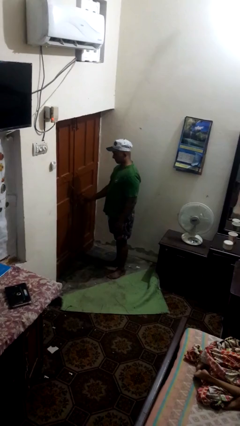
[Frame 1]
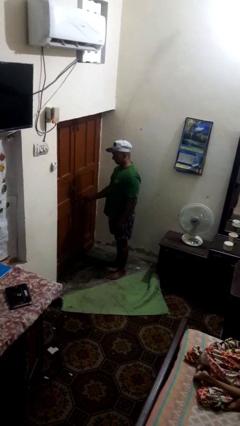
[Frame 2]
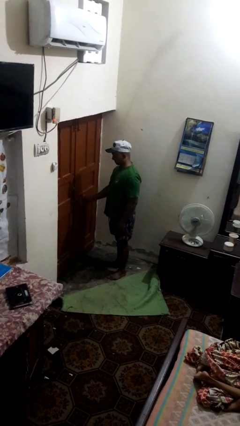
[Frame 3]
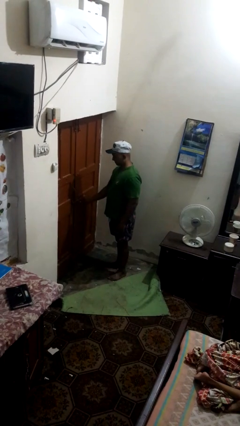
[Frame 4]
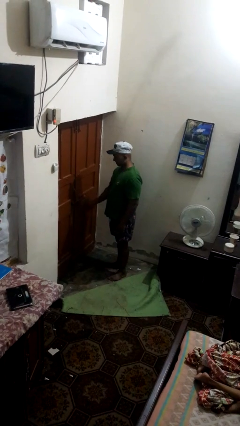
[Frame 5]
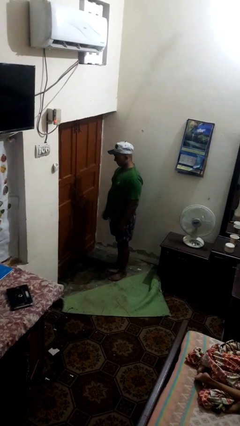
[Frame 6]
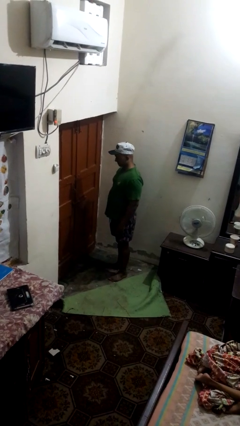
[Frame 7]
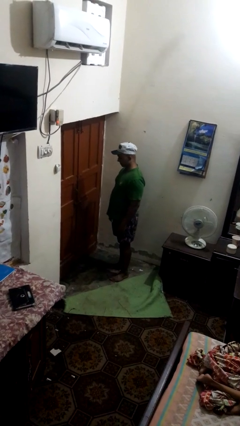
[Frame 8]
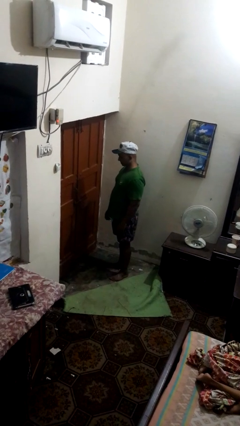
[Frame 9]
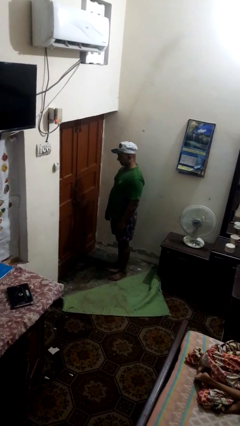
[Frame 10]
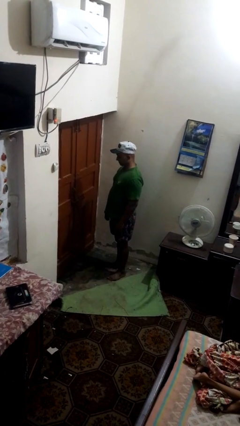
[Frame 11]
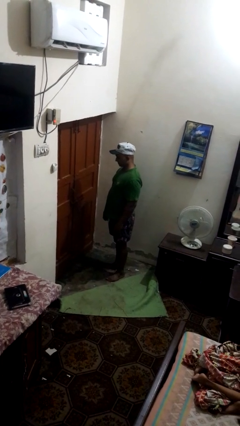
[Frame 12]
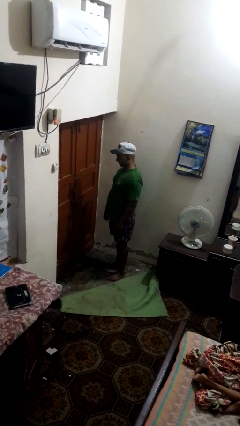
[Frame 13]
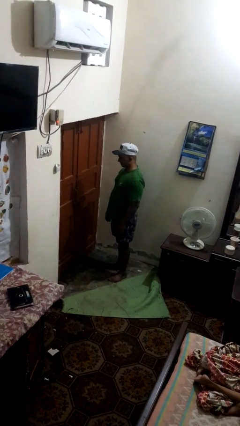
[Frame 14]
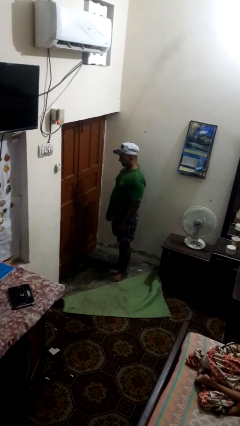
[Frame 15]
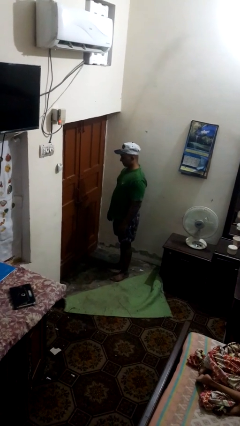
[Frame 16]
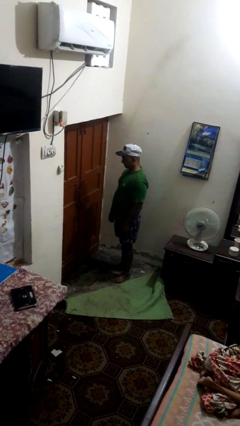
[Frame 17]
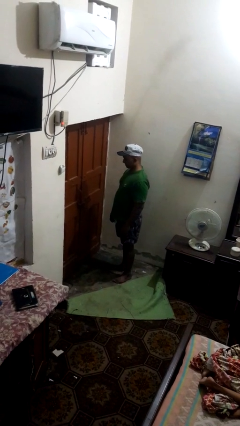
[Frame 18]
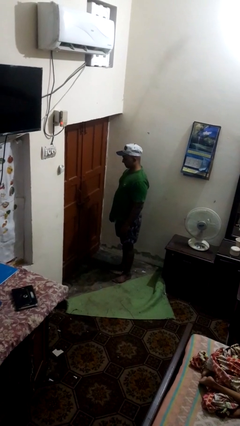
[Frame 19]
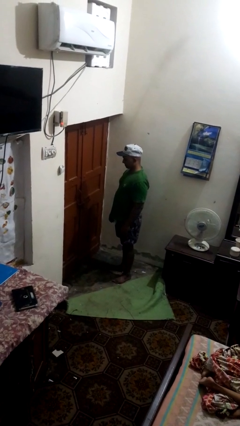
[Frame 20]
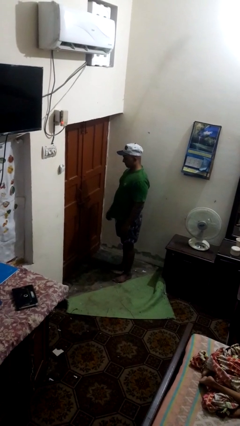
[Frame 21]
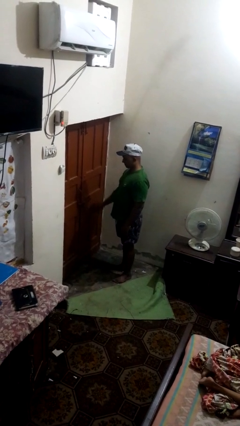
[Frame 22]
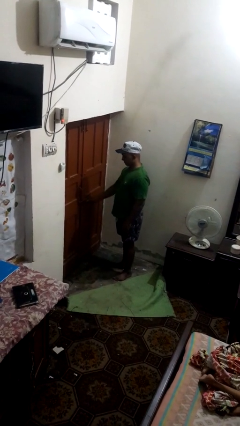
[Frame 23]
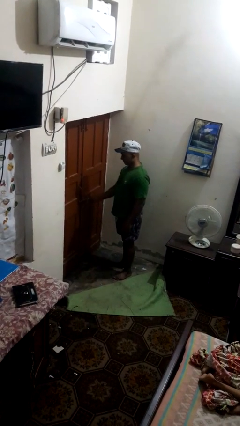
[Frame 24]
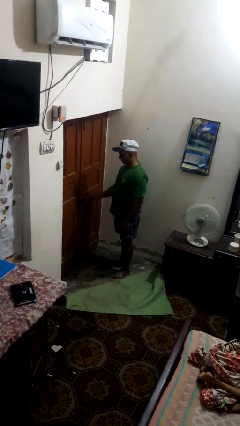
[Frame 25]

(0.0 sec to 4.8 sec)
person locks door with keys

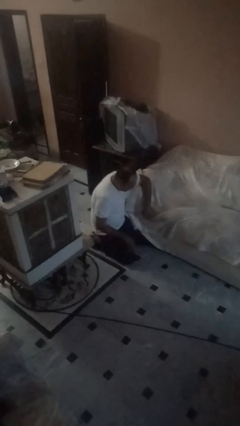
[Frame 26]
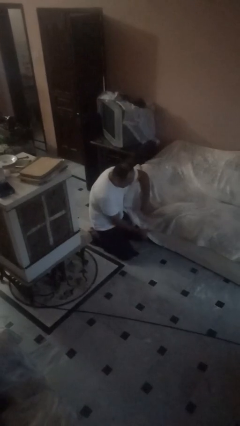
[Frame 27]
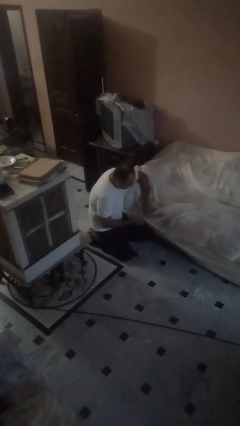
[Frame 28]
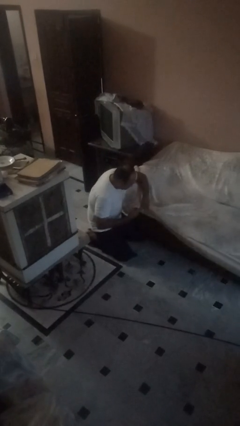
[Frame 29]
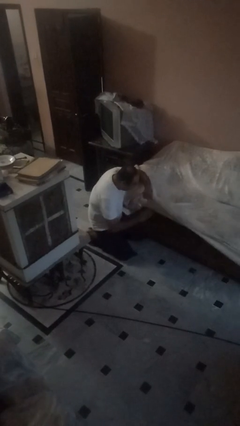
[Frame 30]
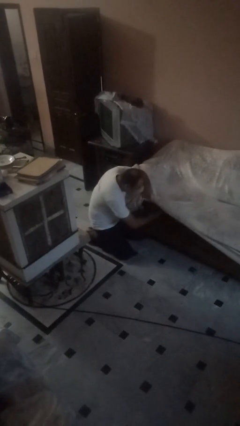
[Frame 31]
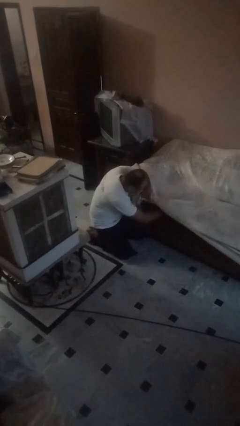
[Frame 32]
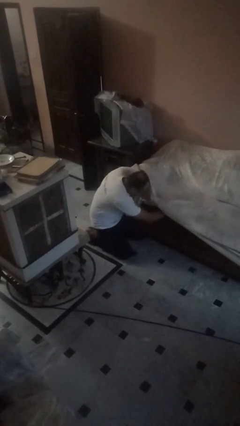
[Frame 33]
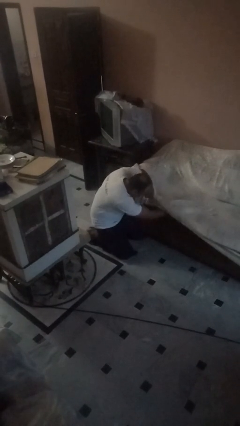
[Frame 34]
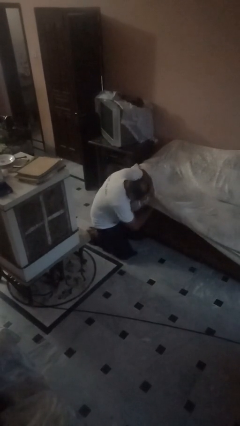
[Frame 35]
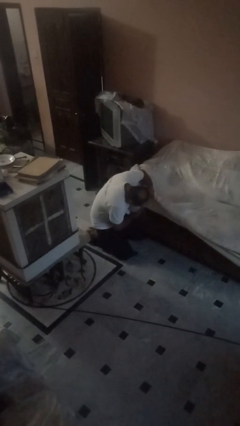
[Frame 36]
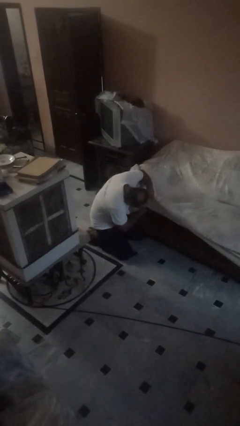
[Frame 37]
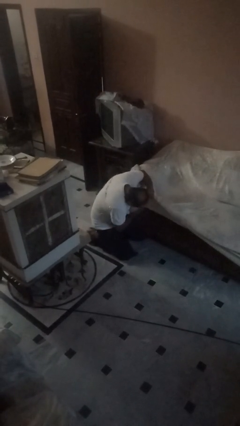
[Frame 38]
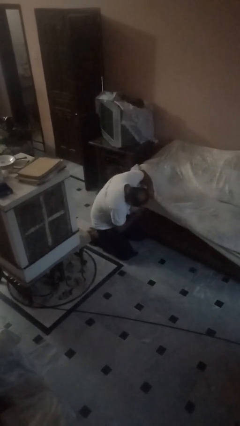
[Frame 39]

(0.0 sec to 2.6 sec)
person searches in couch

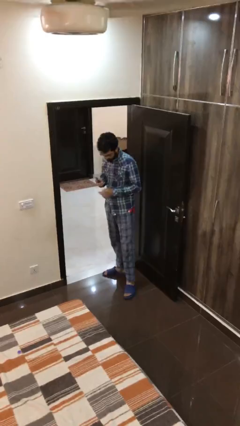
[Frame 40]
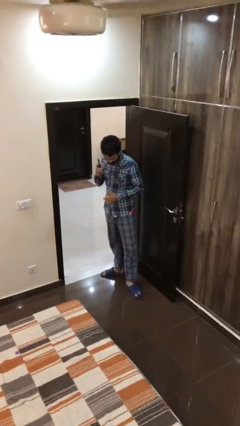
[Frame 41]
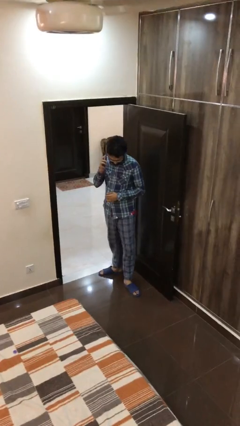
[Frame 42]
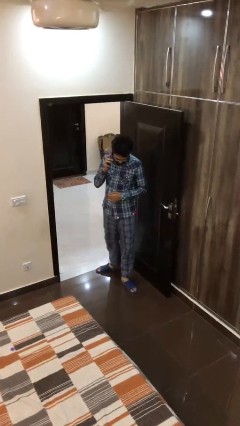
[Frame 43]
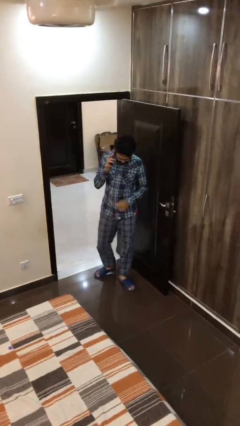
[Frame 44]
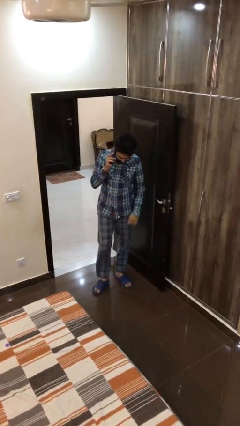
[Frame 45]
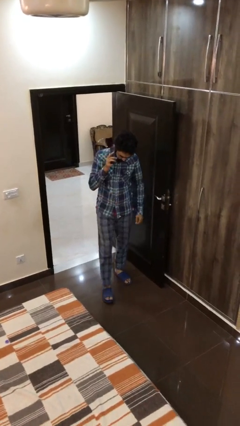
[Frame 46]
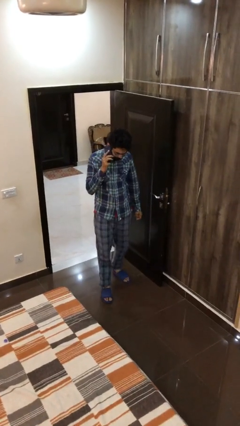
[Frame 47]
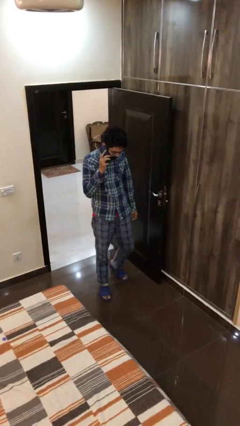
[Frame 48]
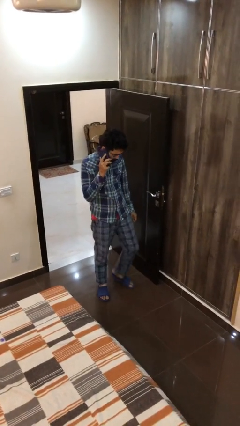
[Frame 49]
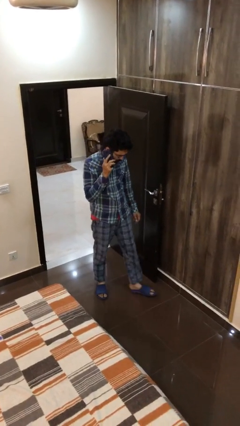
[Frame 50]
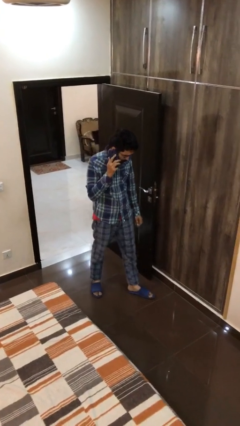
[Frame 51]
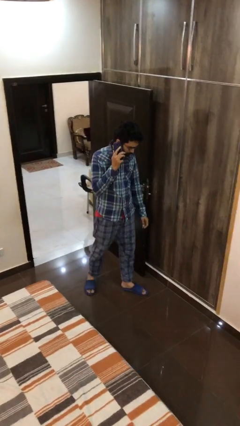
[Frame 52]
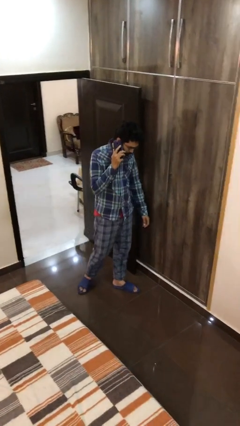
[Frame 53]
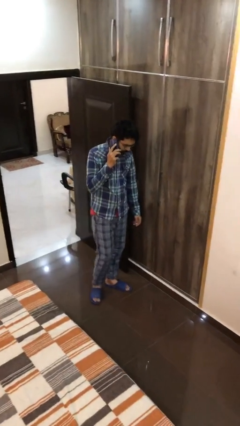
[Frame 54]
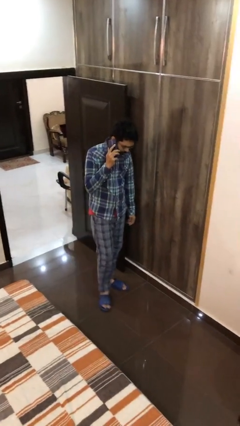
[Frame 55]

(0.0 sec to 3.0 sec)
person talks on phone

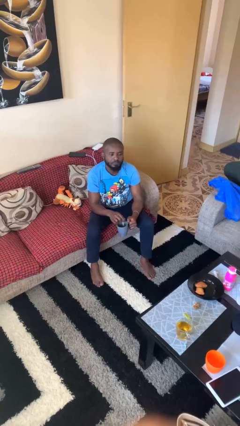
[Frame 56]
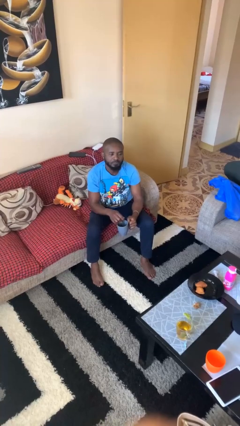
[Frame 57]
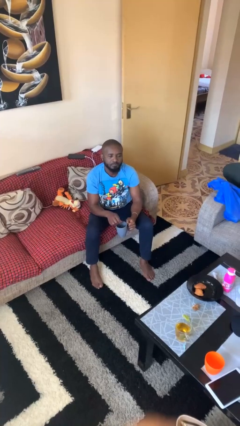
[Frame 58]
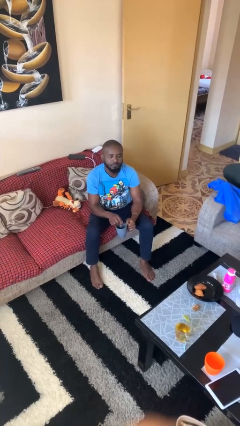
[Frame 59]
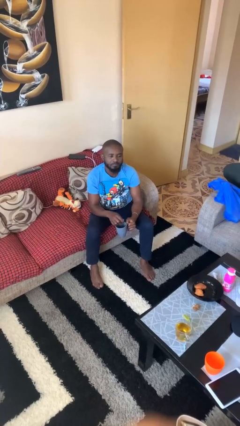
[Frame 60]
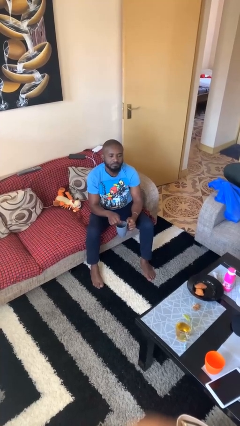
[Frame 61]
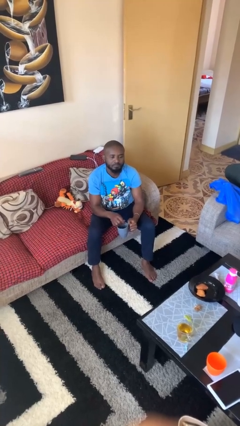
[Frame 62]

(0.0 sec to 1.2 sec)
person stirs mug

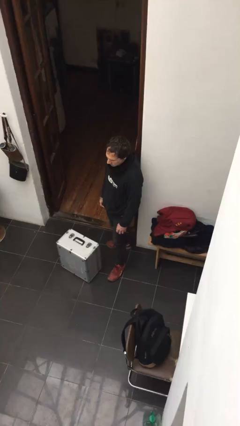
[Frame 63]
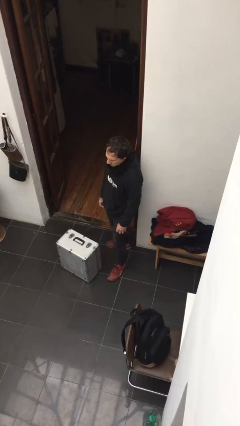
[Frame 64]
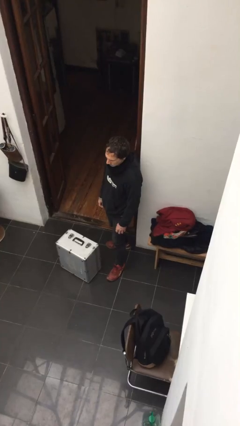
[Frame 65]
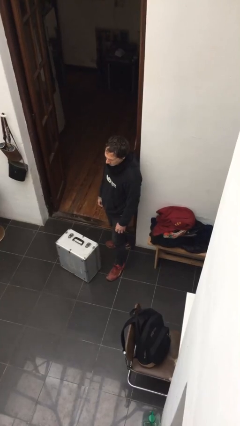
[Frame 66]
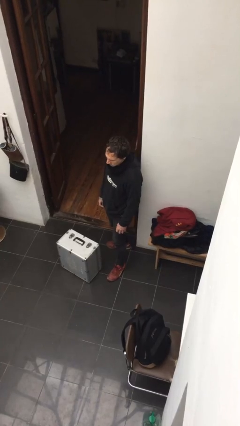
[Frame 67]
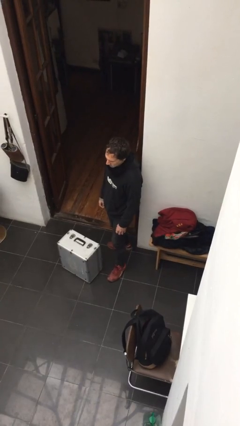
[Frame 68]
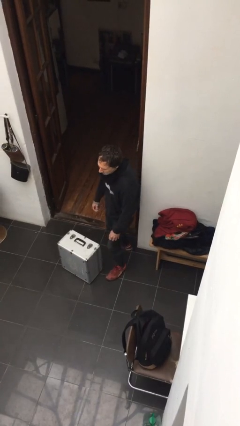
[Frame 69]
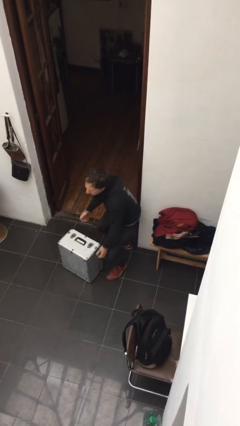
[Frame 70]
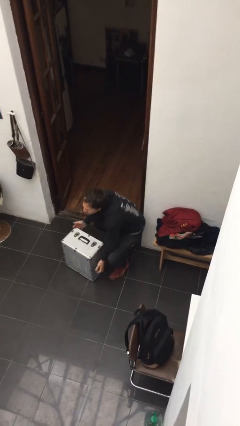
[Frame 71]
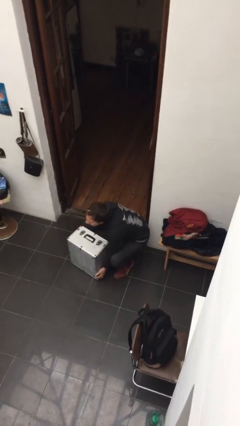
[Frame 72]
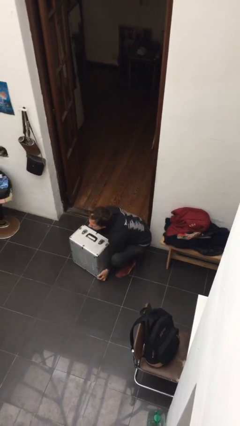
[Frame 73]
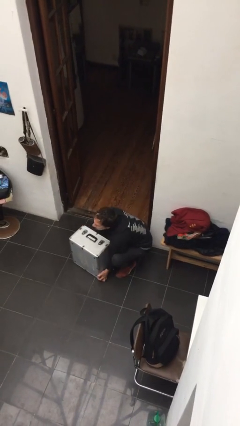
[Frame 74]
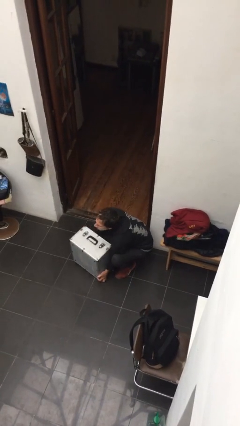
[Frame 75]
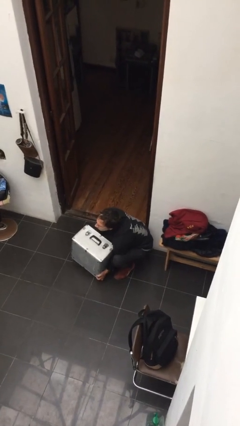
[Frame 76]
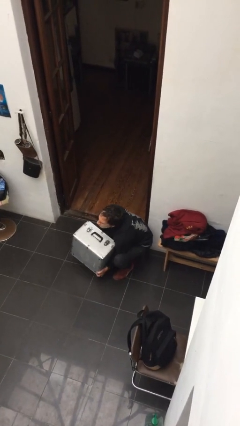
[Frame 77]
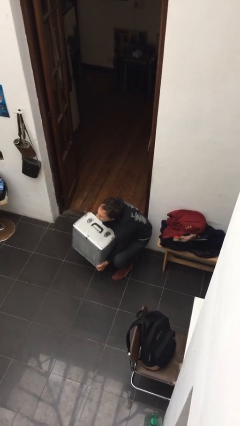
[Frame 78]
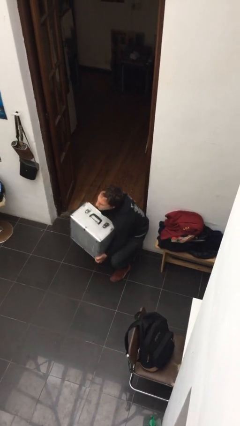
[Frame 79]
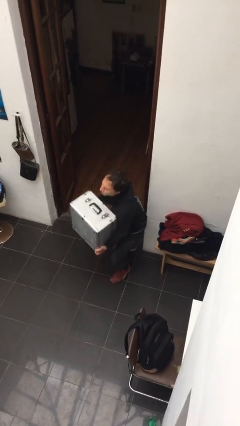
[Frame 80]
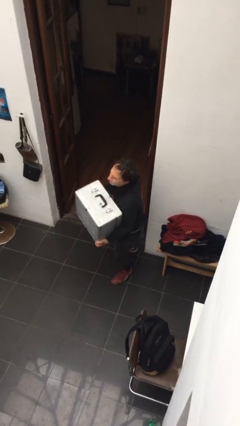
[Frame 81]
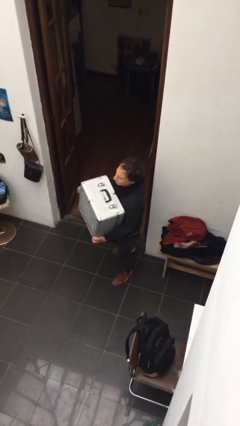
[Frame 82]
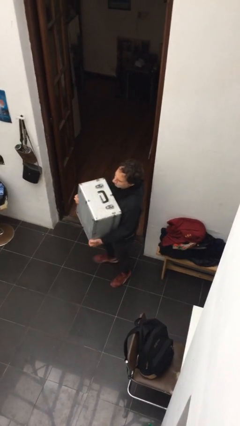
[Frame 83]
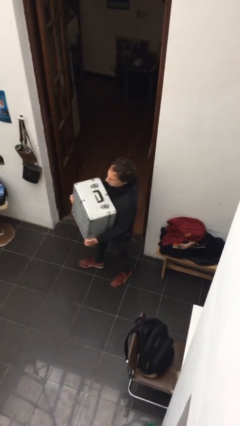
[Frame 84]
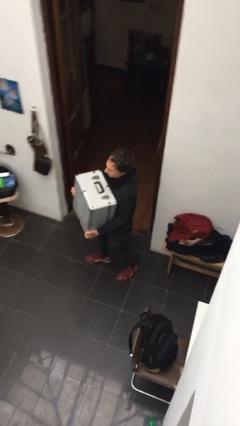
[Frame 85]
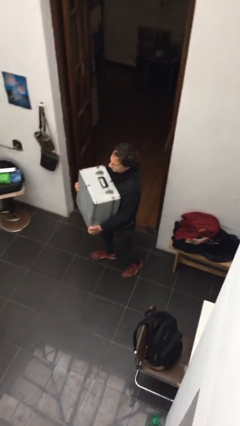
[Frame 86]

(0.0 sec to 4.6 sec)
person picks up object from floor

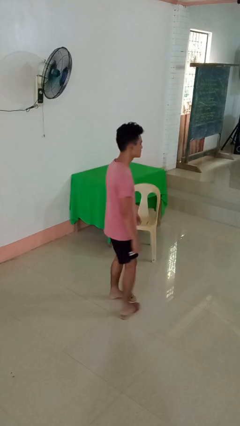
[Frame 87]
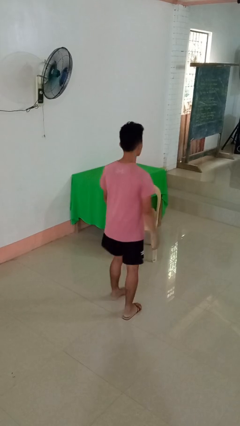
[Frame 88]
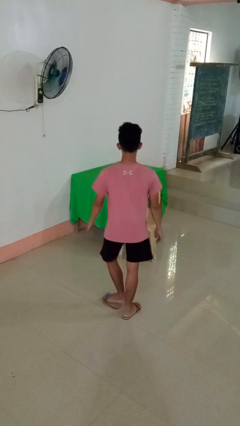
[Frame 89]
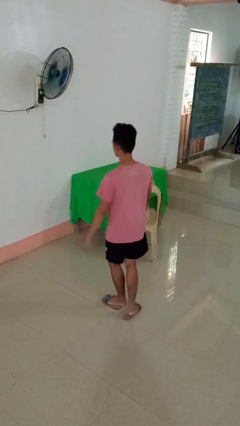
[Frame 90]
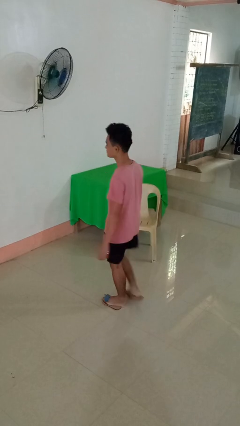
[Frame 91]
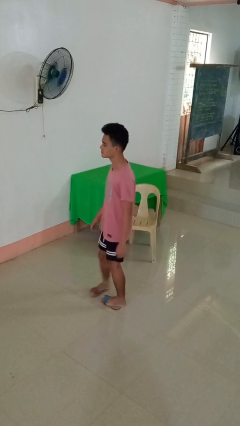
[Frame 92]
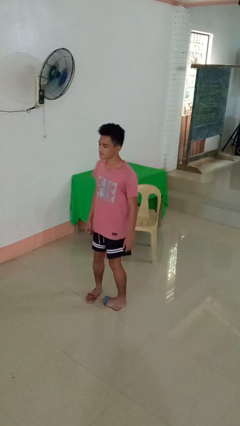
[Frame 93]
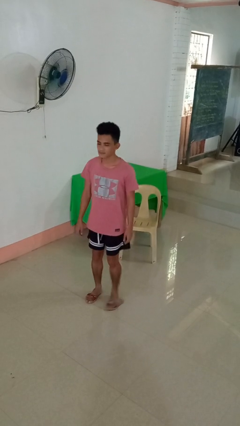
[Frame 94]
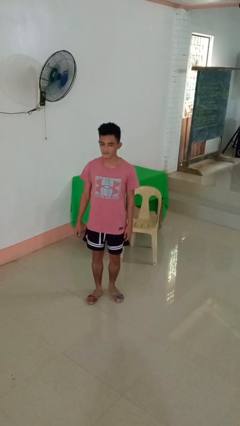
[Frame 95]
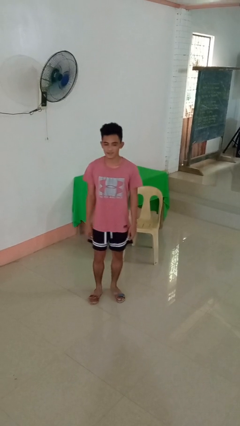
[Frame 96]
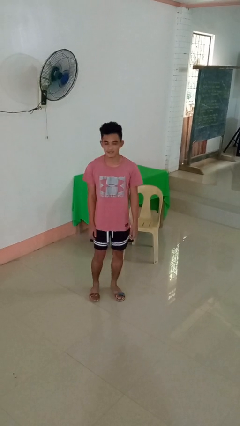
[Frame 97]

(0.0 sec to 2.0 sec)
person twirls
